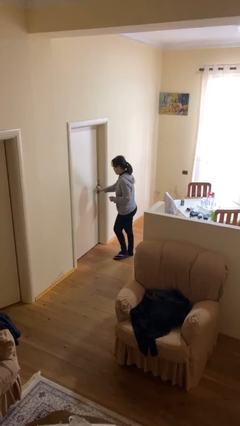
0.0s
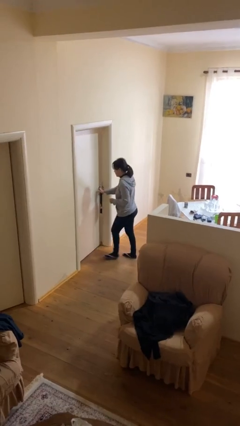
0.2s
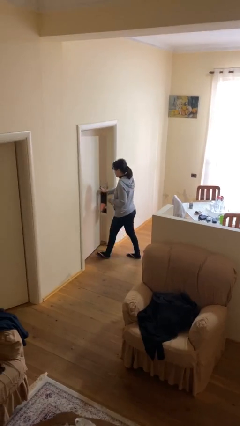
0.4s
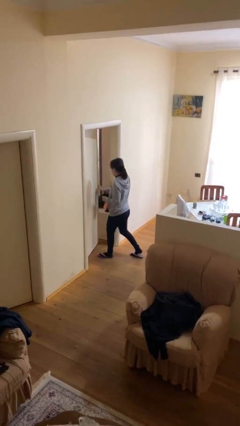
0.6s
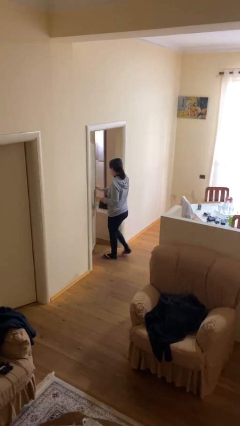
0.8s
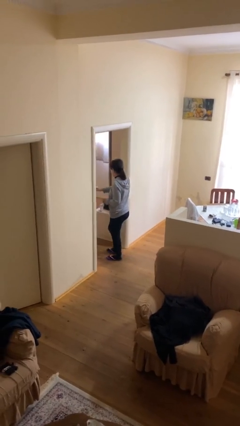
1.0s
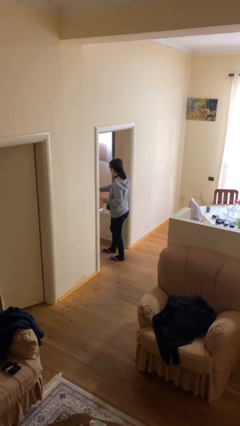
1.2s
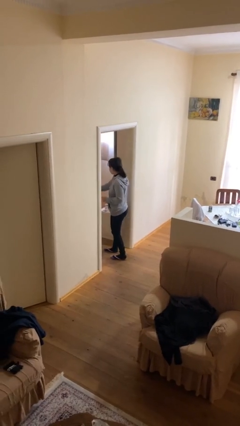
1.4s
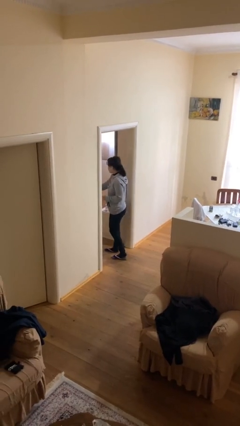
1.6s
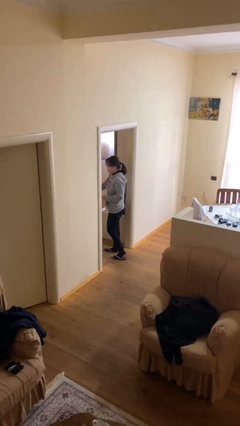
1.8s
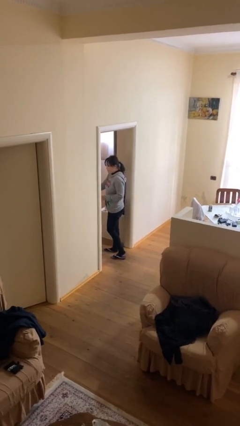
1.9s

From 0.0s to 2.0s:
person opens facility door

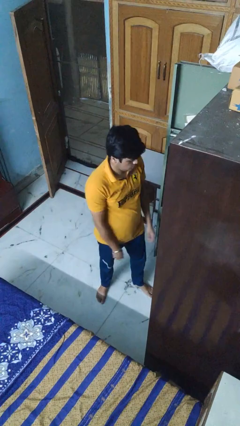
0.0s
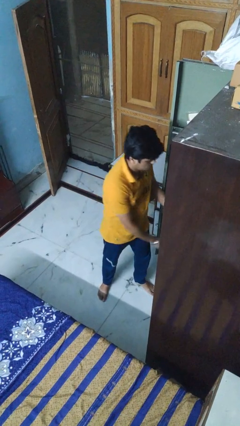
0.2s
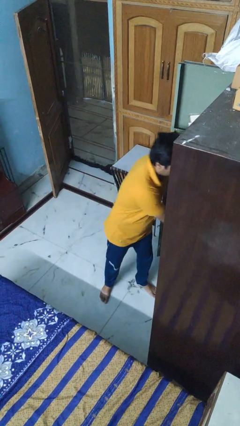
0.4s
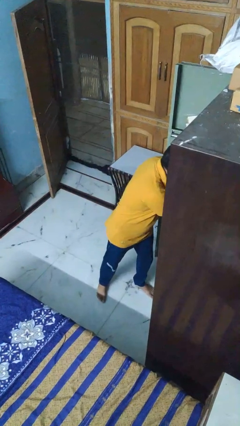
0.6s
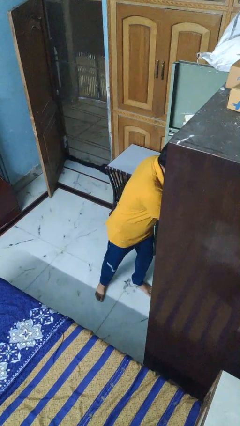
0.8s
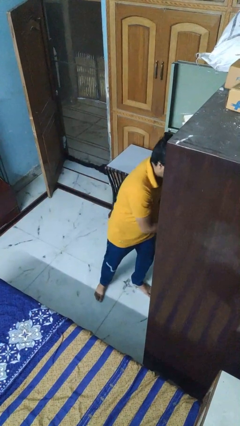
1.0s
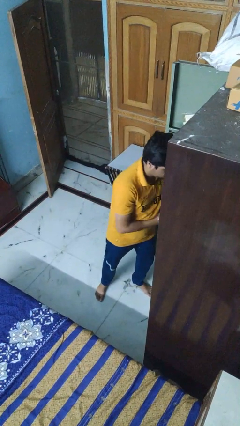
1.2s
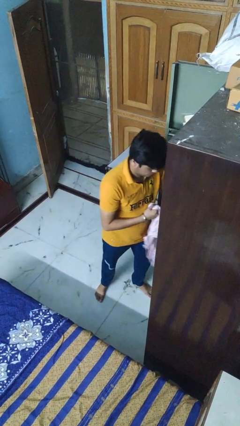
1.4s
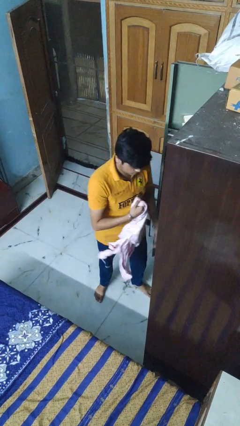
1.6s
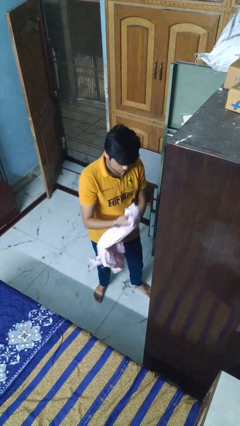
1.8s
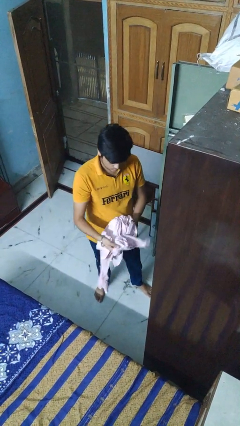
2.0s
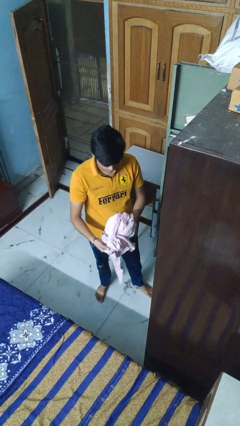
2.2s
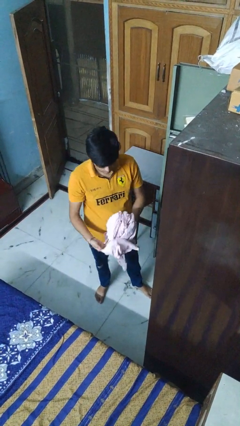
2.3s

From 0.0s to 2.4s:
person takes clothes from dresser

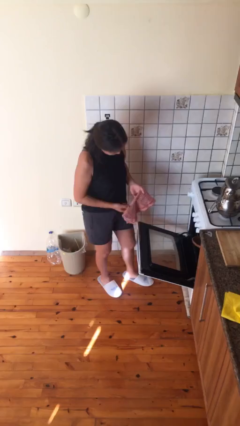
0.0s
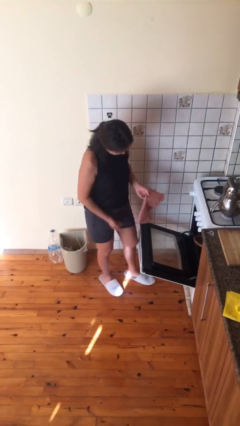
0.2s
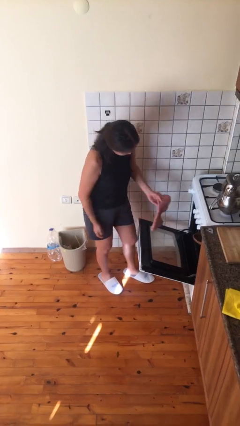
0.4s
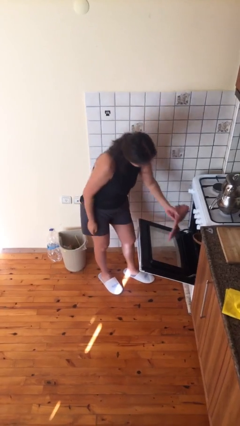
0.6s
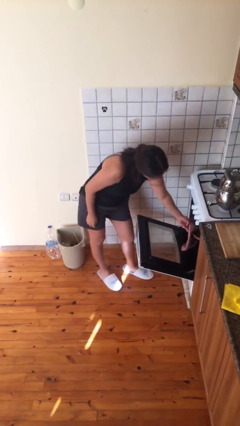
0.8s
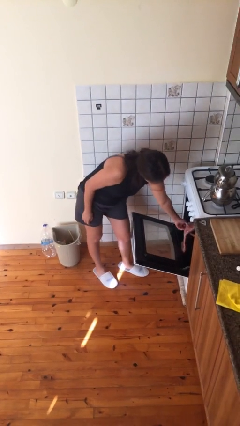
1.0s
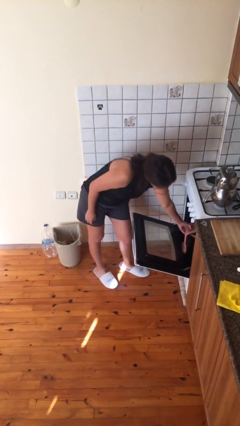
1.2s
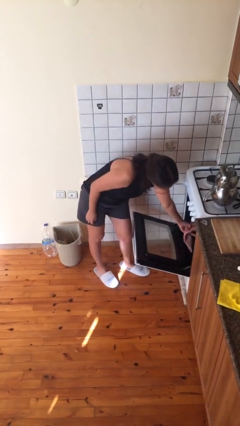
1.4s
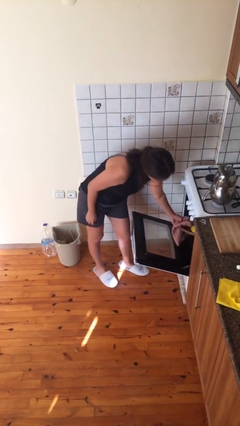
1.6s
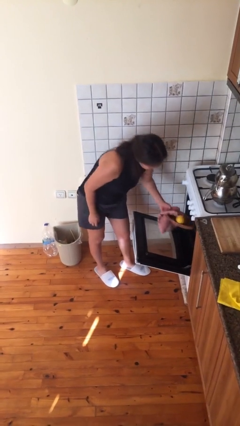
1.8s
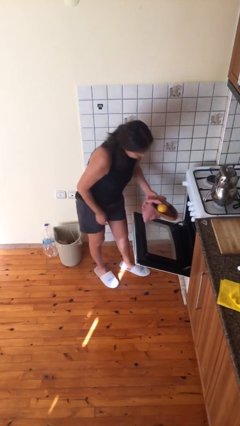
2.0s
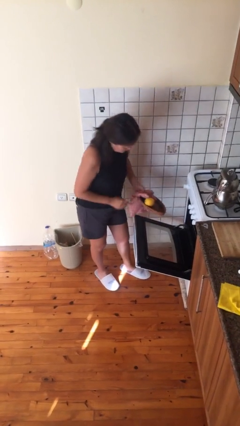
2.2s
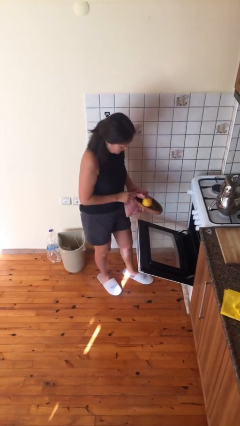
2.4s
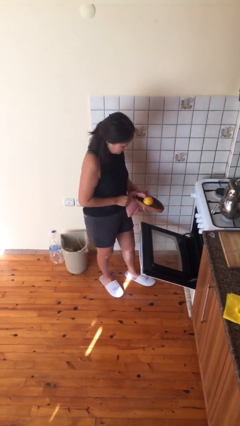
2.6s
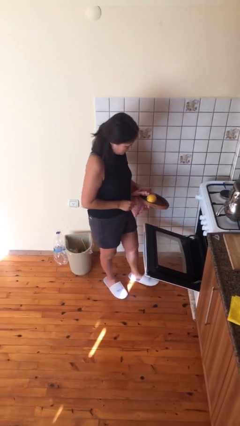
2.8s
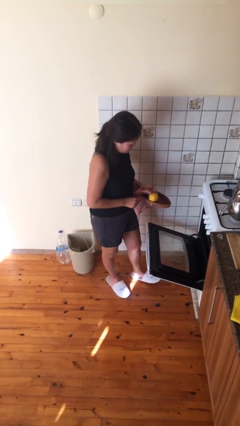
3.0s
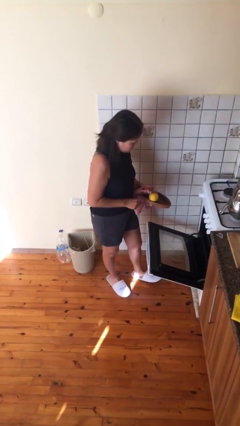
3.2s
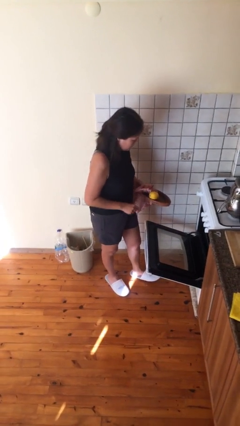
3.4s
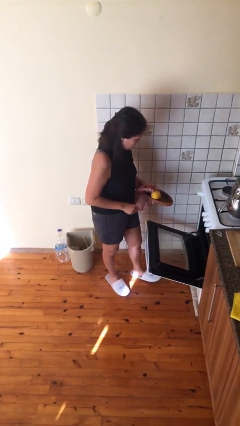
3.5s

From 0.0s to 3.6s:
person takes object from oven

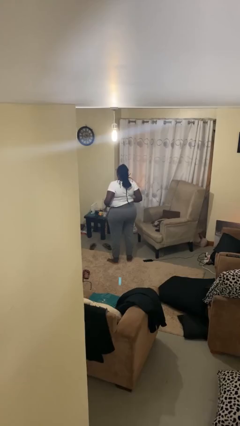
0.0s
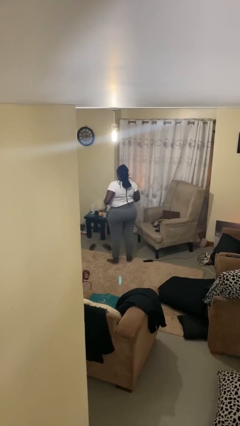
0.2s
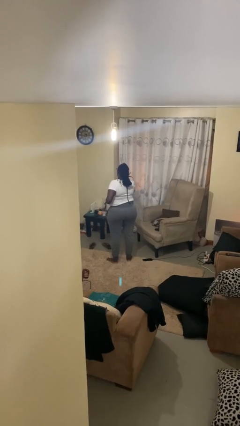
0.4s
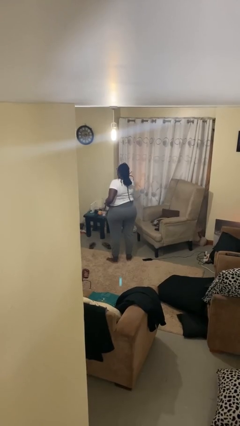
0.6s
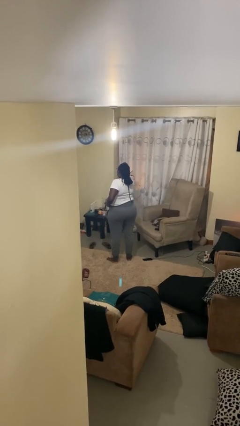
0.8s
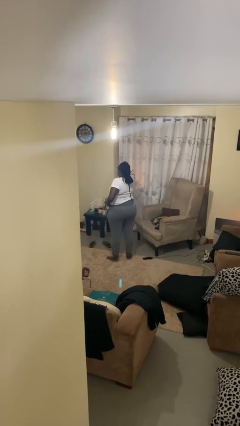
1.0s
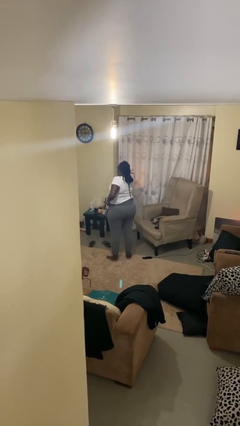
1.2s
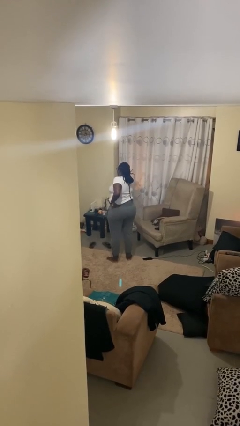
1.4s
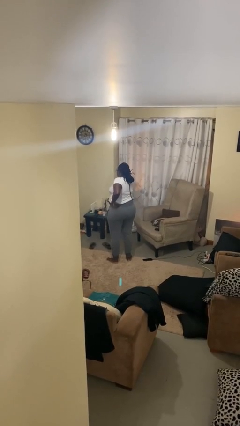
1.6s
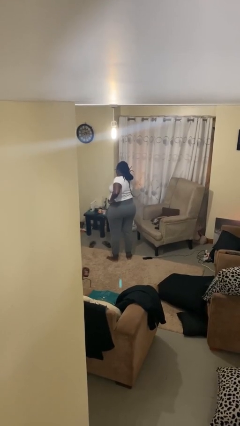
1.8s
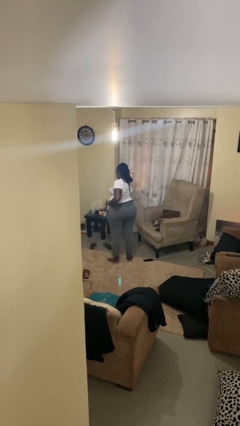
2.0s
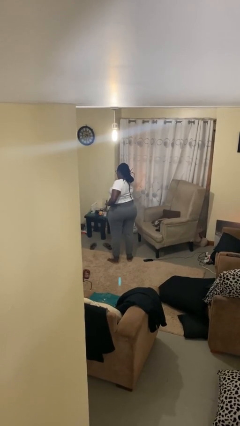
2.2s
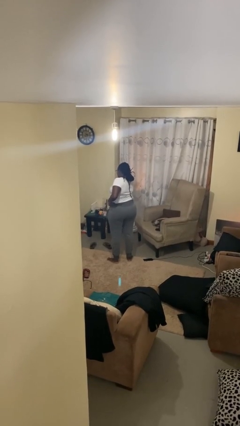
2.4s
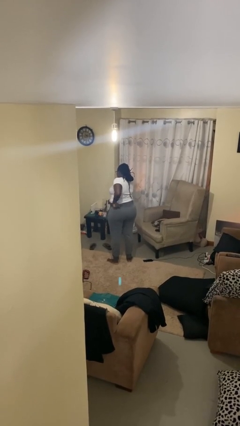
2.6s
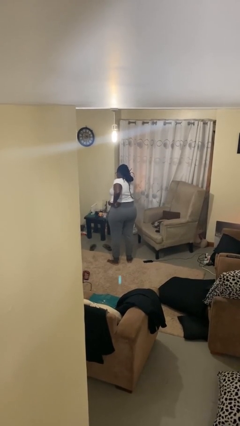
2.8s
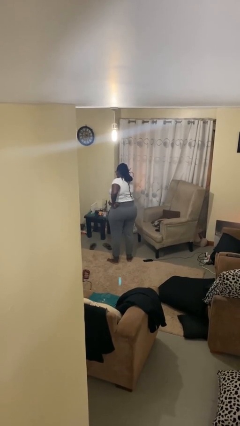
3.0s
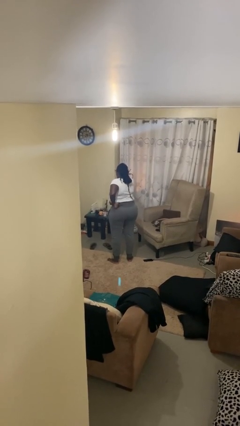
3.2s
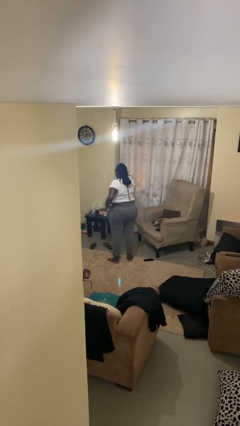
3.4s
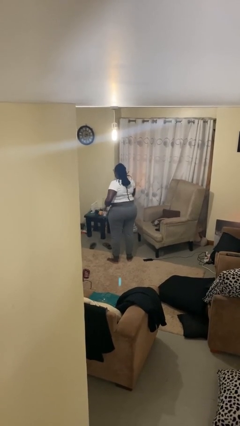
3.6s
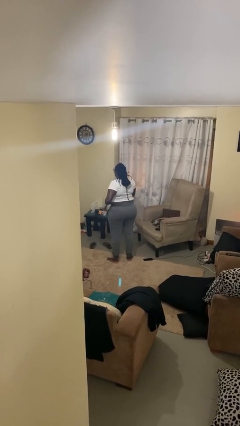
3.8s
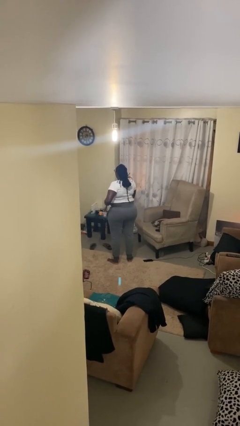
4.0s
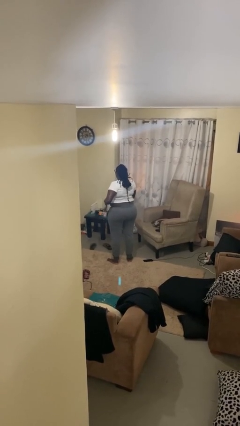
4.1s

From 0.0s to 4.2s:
person hikes up pants

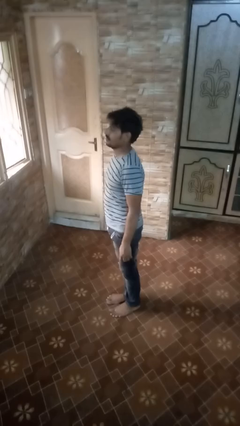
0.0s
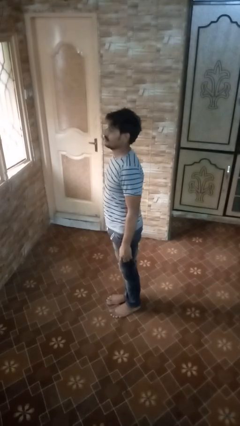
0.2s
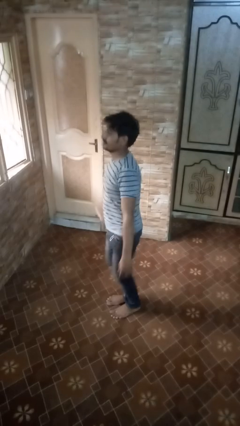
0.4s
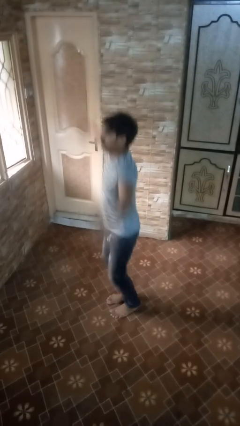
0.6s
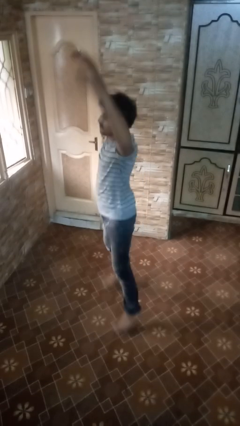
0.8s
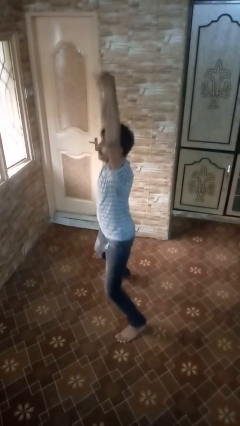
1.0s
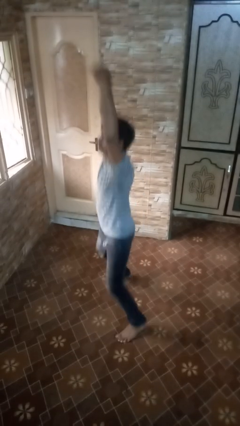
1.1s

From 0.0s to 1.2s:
person exercises with jumping jacks

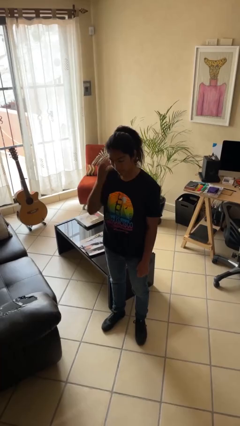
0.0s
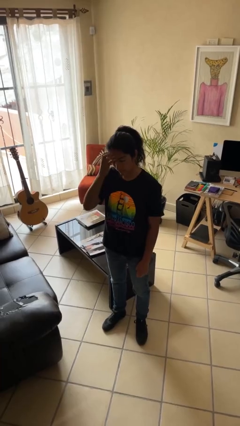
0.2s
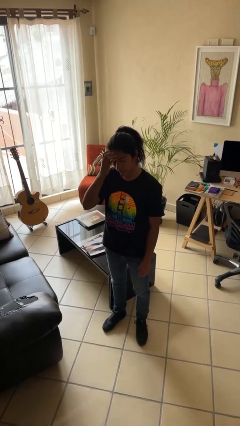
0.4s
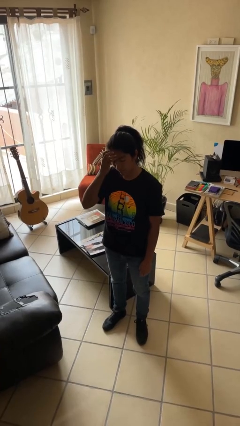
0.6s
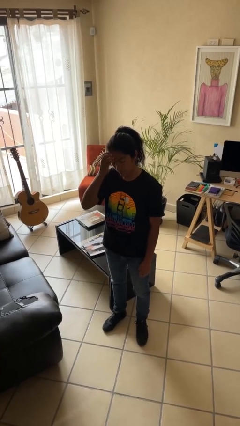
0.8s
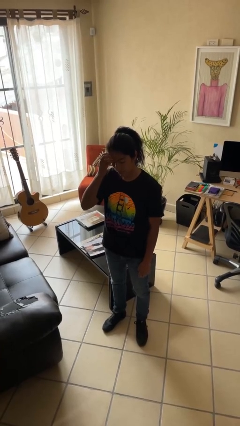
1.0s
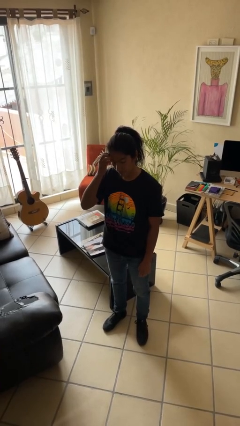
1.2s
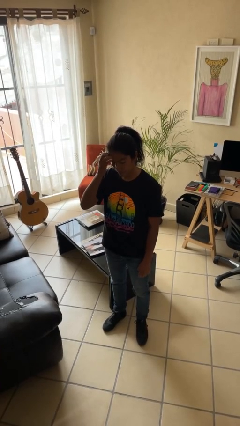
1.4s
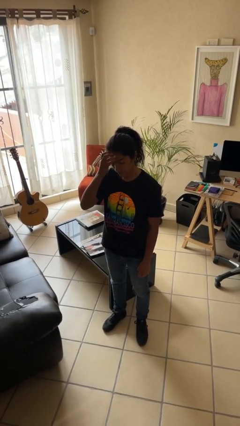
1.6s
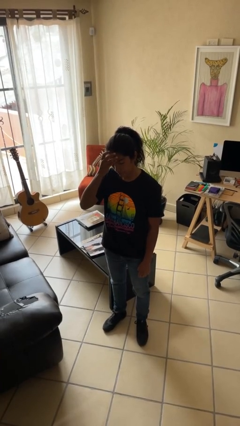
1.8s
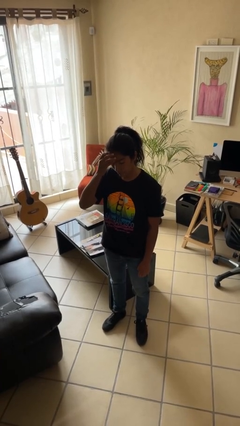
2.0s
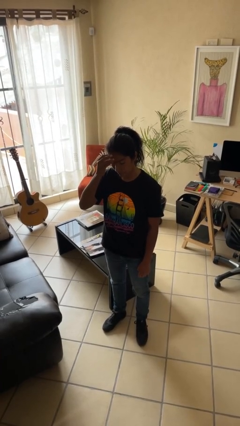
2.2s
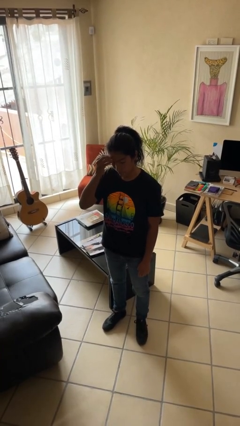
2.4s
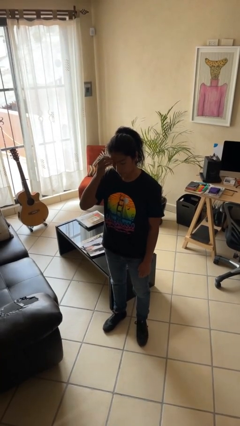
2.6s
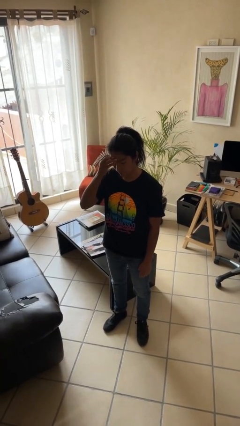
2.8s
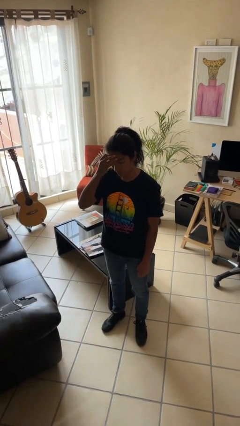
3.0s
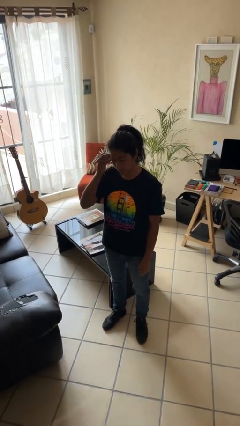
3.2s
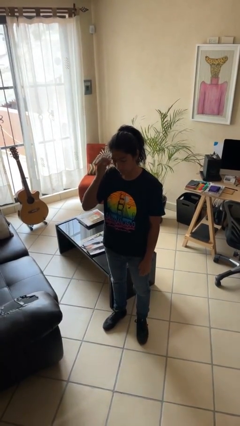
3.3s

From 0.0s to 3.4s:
person scratches face

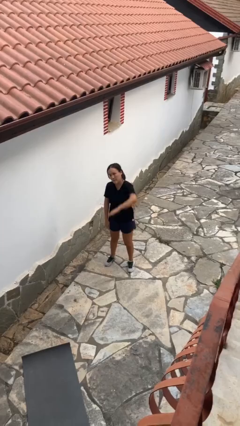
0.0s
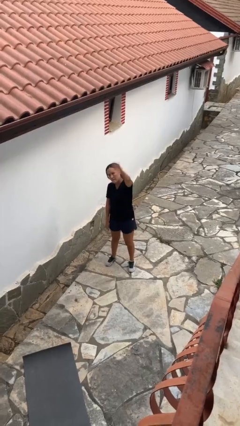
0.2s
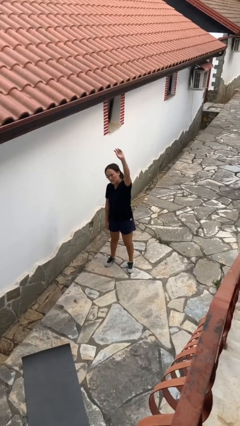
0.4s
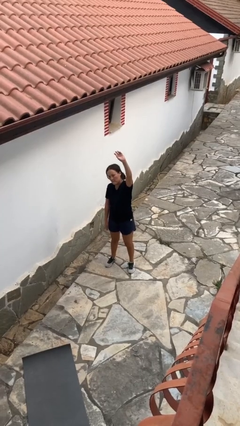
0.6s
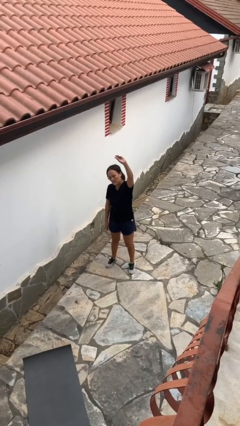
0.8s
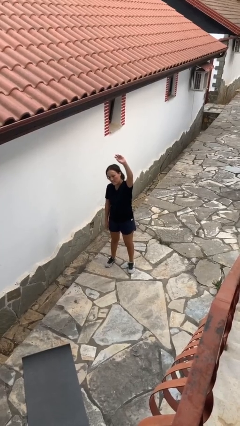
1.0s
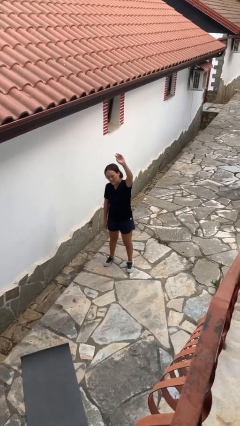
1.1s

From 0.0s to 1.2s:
person gestures swipe up
